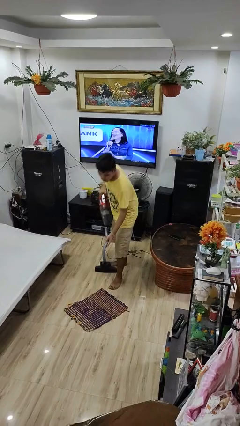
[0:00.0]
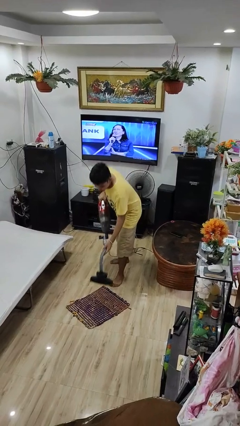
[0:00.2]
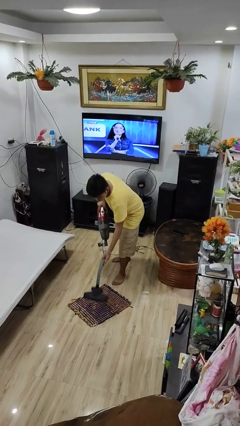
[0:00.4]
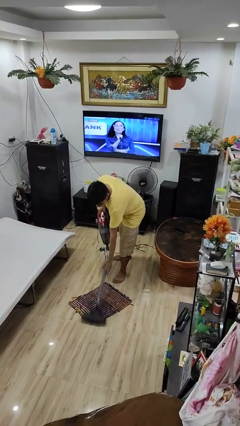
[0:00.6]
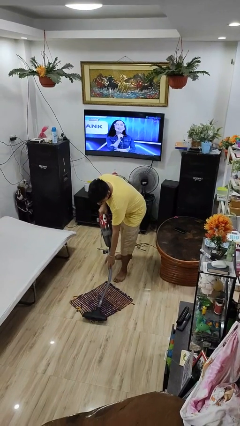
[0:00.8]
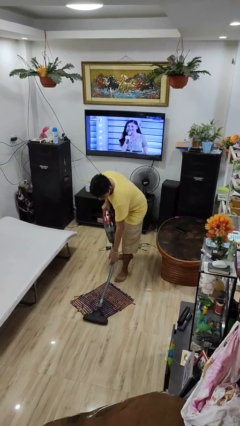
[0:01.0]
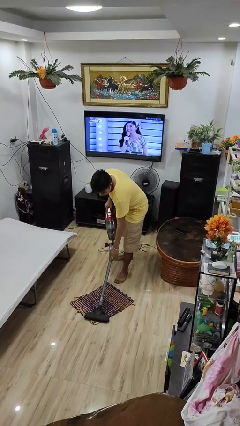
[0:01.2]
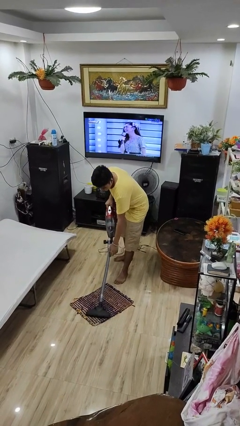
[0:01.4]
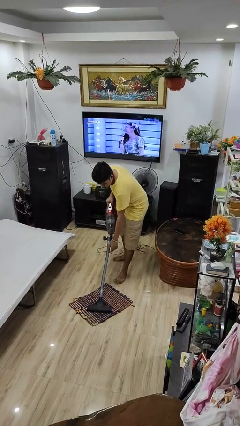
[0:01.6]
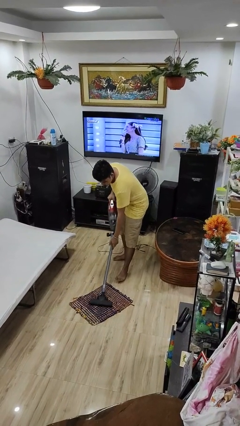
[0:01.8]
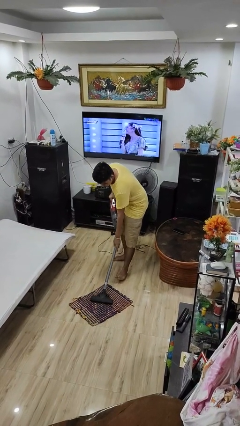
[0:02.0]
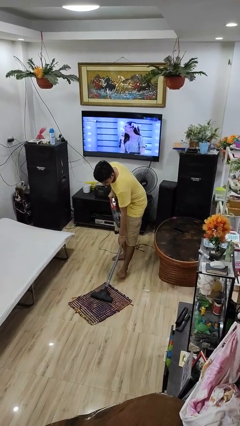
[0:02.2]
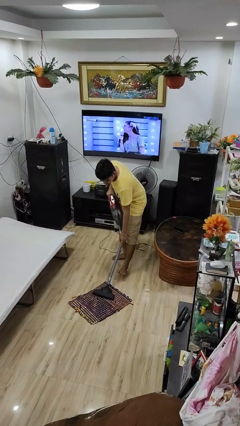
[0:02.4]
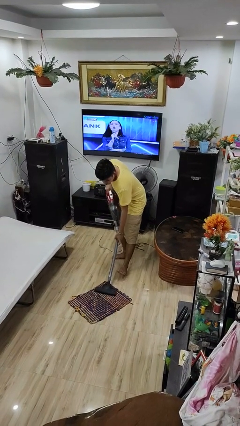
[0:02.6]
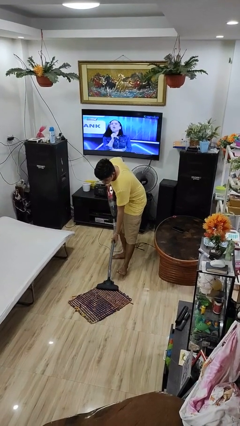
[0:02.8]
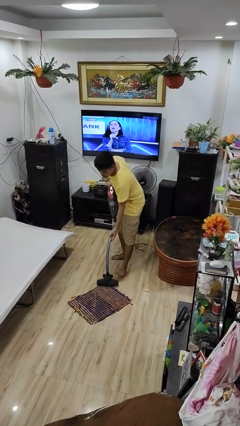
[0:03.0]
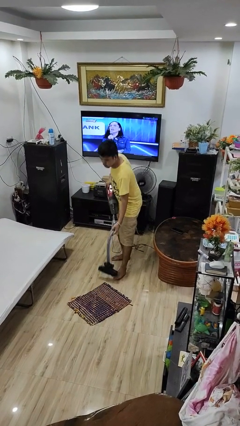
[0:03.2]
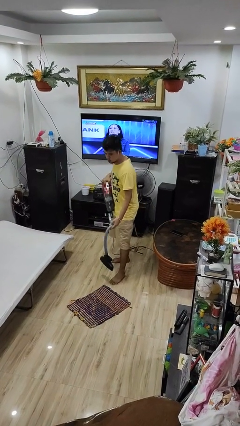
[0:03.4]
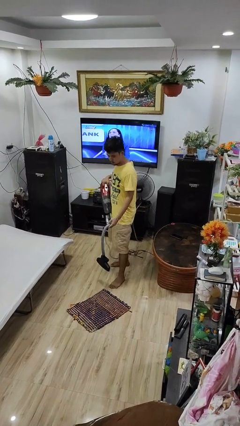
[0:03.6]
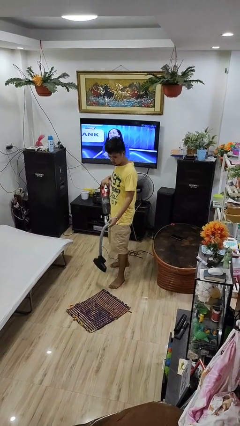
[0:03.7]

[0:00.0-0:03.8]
person vacuums carpet

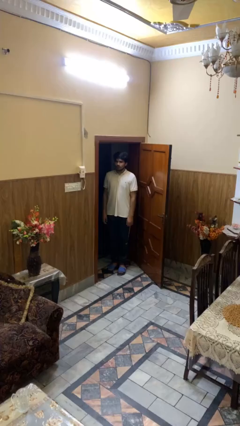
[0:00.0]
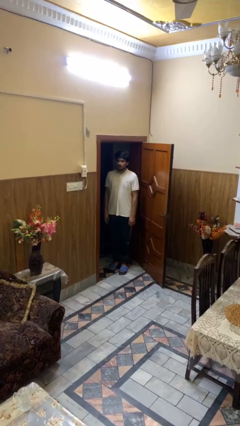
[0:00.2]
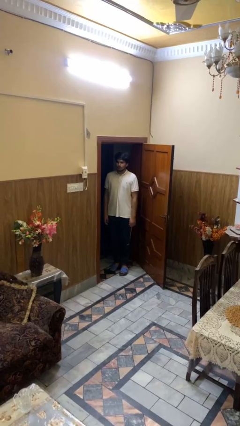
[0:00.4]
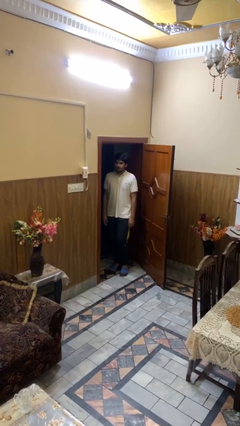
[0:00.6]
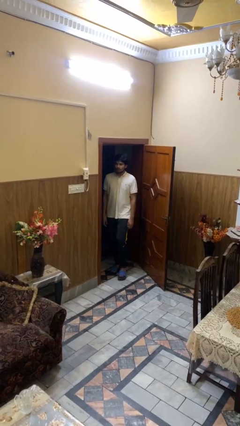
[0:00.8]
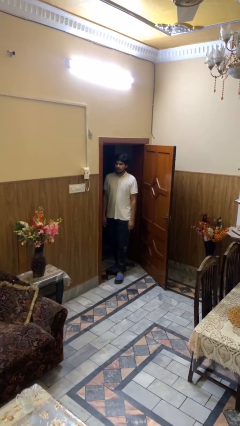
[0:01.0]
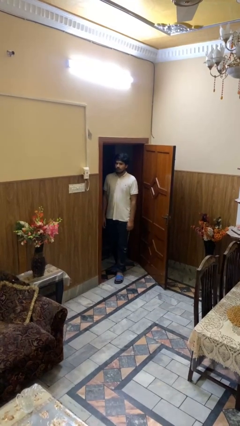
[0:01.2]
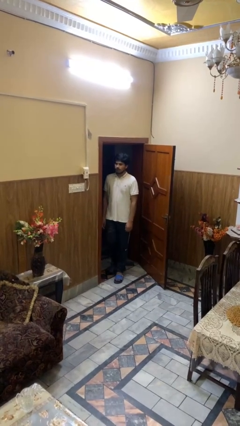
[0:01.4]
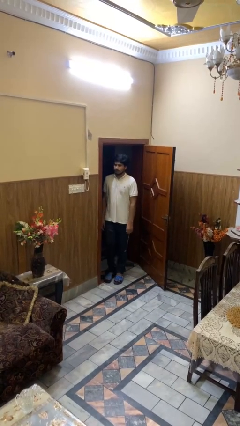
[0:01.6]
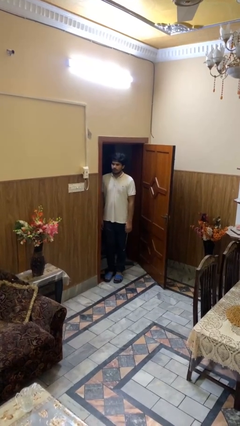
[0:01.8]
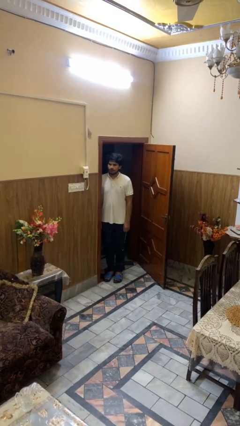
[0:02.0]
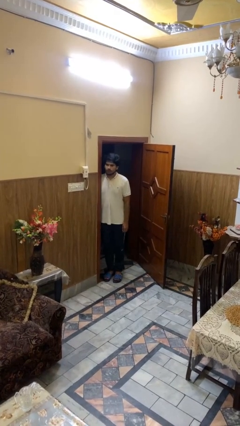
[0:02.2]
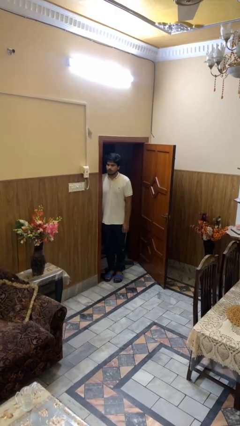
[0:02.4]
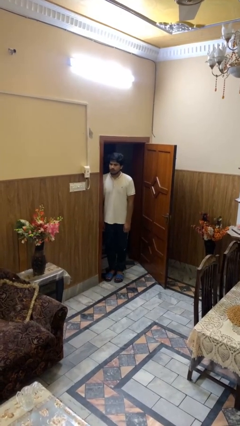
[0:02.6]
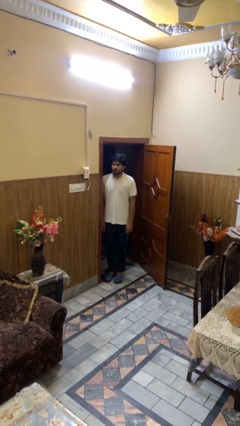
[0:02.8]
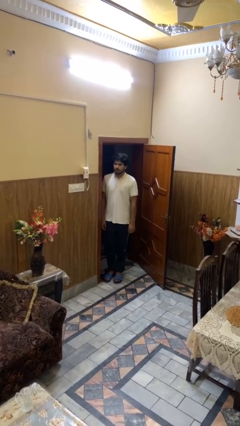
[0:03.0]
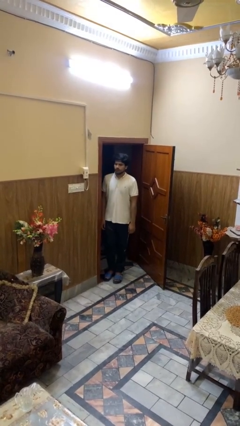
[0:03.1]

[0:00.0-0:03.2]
person bumps into wall

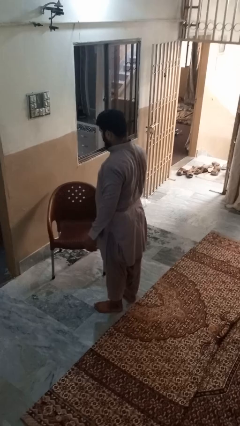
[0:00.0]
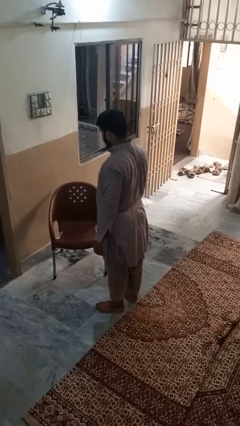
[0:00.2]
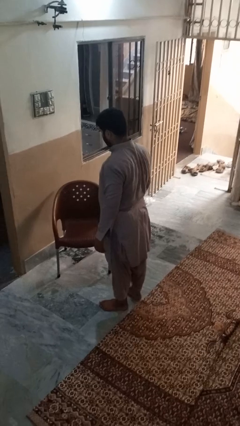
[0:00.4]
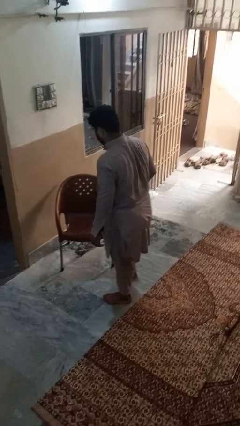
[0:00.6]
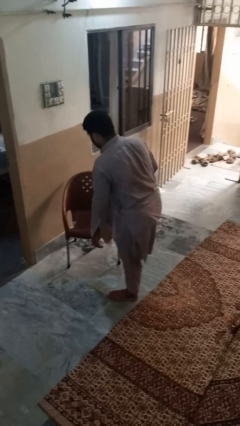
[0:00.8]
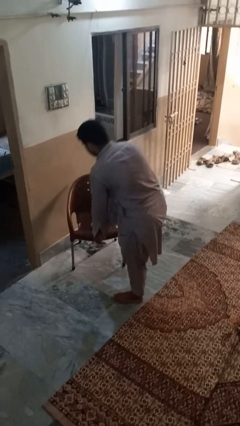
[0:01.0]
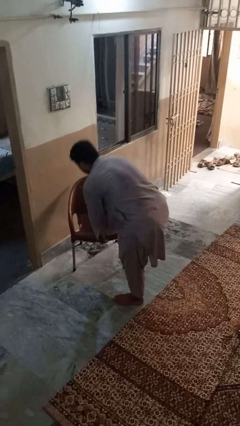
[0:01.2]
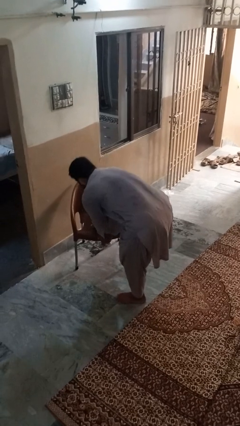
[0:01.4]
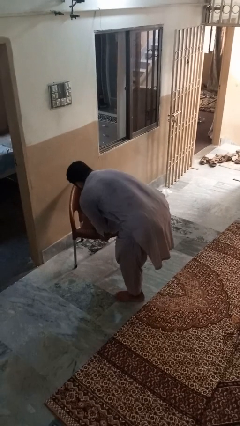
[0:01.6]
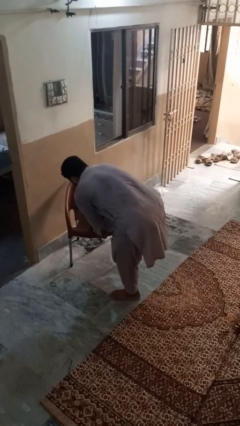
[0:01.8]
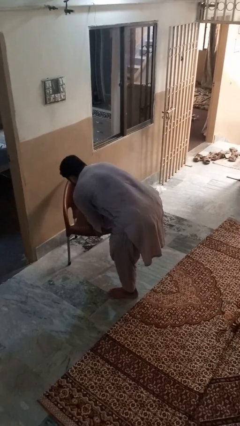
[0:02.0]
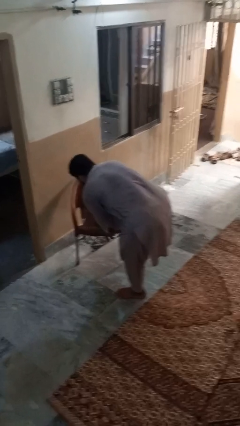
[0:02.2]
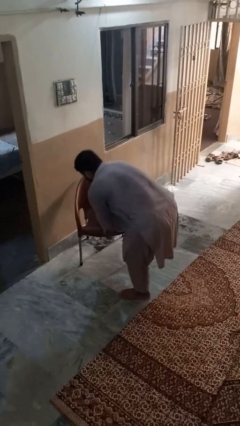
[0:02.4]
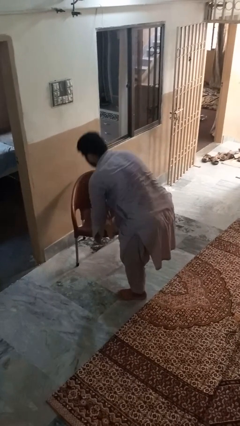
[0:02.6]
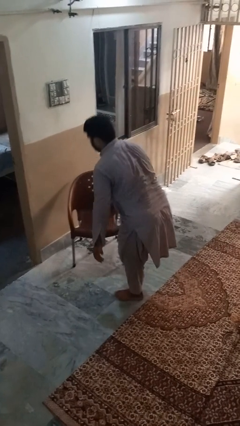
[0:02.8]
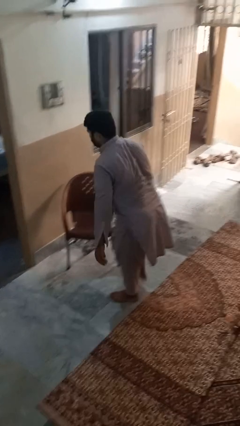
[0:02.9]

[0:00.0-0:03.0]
person stubs toe

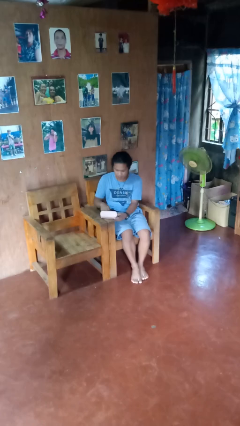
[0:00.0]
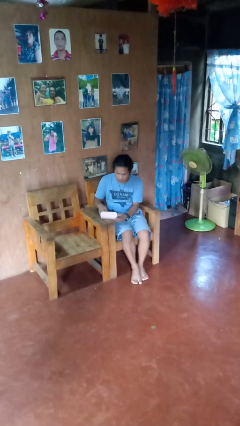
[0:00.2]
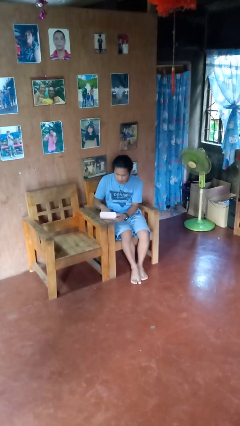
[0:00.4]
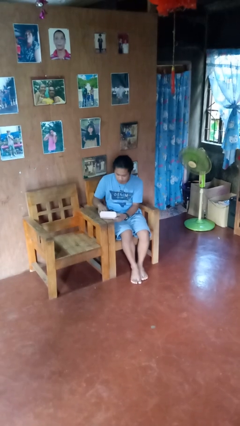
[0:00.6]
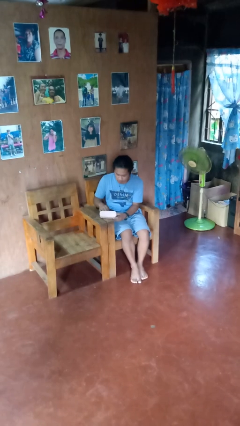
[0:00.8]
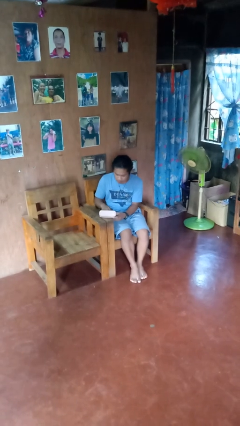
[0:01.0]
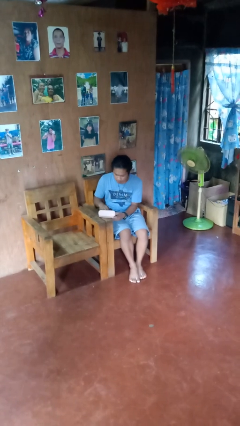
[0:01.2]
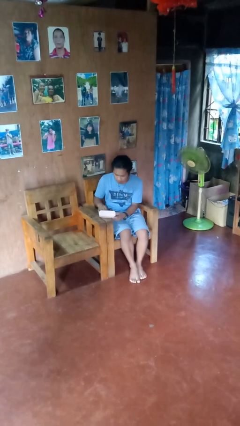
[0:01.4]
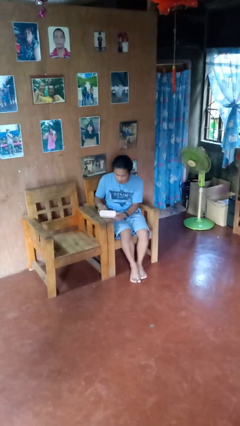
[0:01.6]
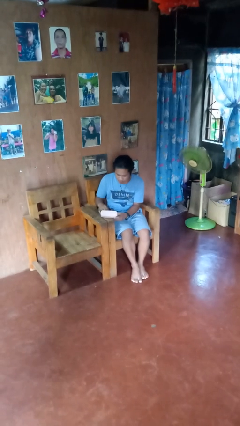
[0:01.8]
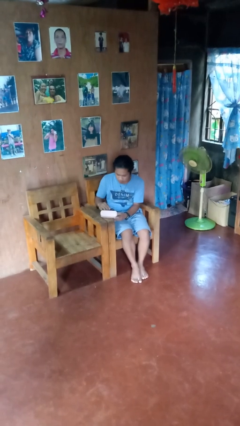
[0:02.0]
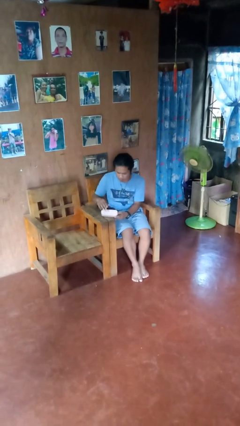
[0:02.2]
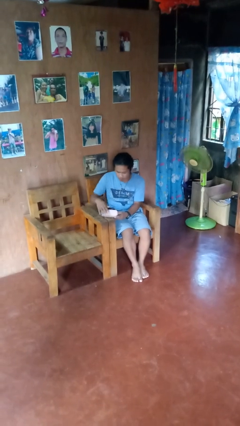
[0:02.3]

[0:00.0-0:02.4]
person searches jewelry box

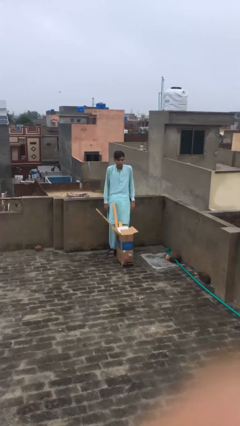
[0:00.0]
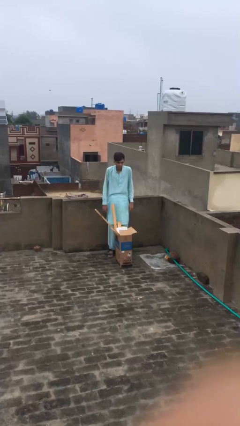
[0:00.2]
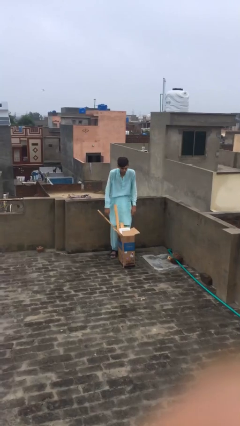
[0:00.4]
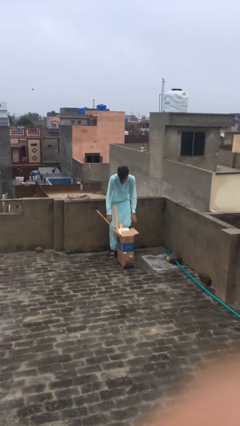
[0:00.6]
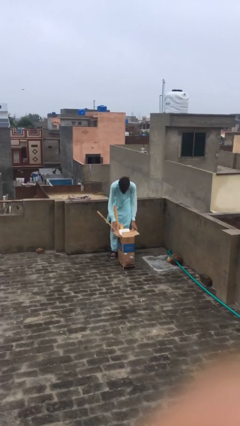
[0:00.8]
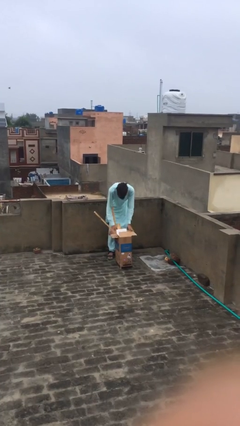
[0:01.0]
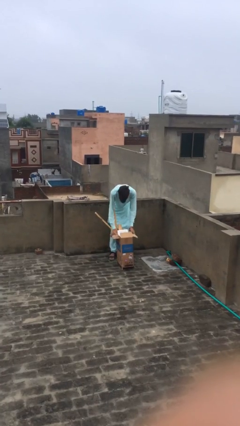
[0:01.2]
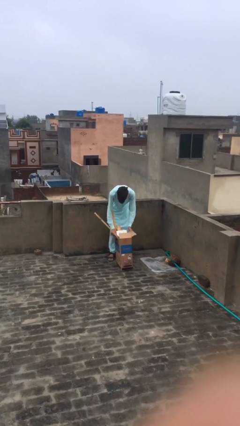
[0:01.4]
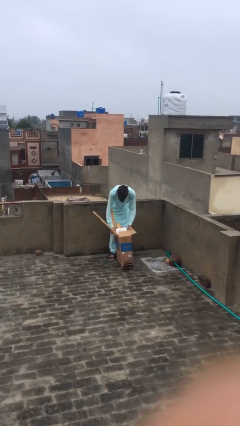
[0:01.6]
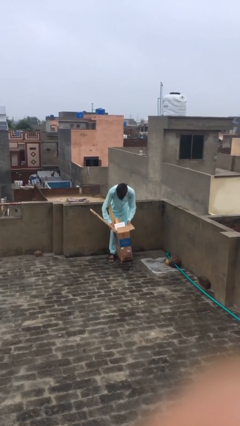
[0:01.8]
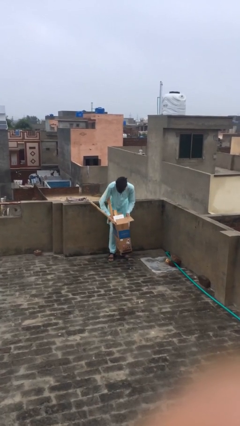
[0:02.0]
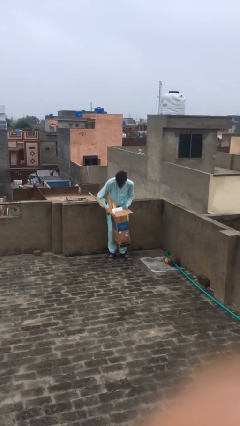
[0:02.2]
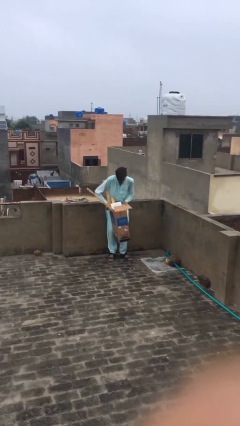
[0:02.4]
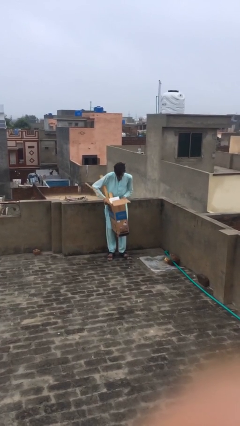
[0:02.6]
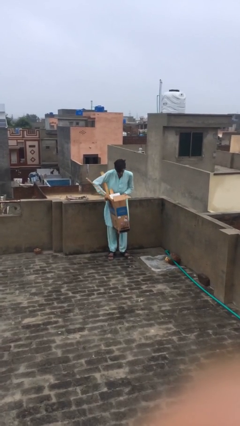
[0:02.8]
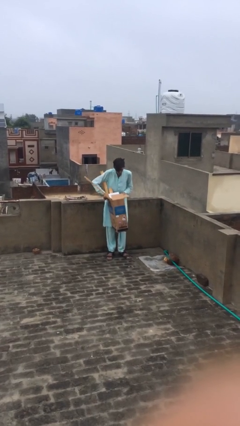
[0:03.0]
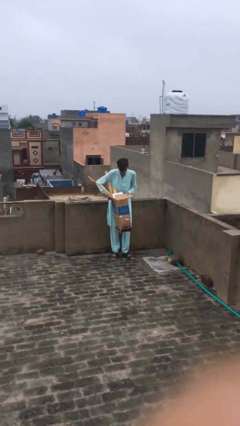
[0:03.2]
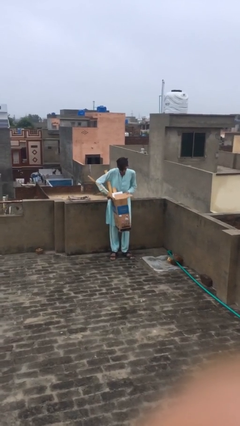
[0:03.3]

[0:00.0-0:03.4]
person picks up object from floor

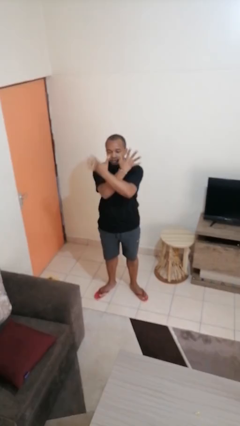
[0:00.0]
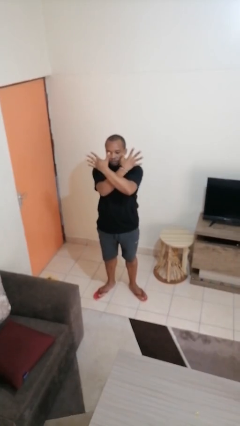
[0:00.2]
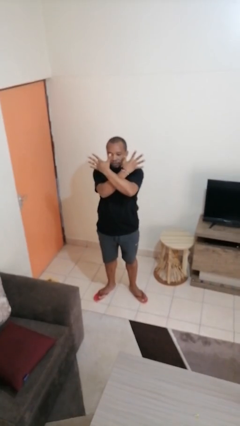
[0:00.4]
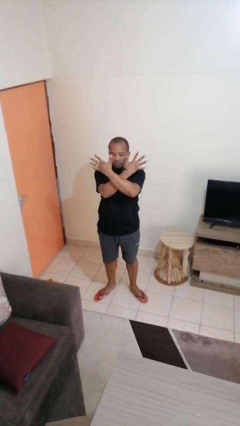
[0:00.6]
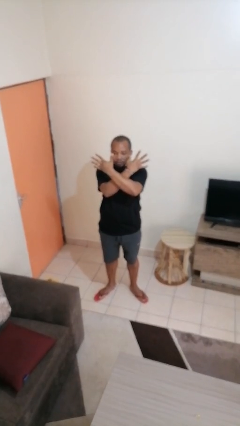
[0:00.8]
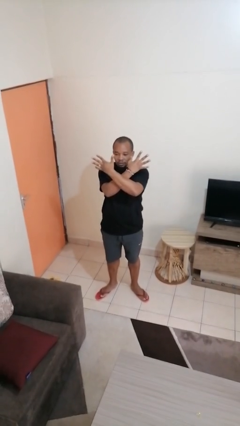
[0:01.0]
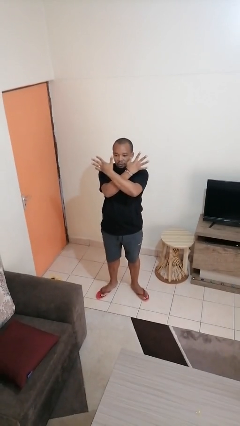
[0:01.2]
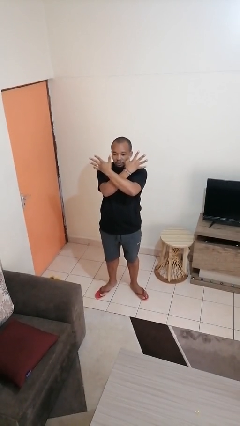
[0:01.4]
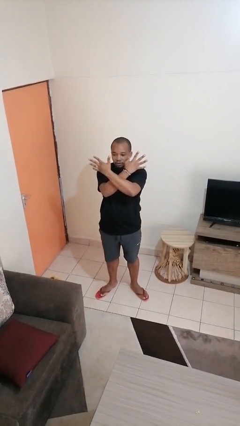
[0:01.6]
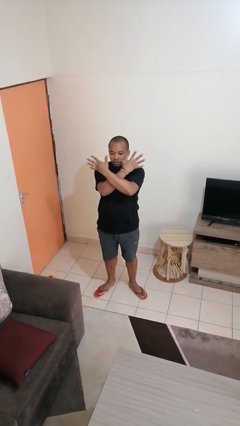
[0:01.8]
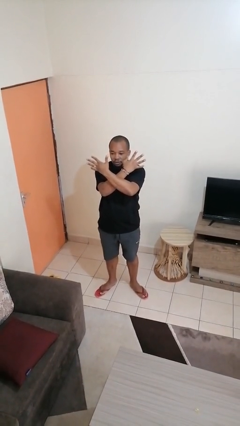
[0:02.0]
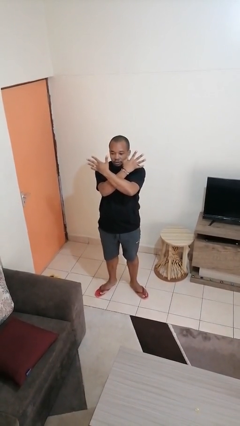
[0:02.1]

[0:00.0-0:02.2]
person gestures arms x
